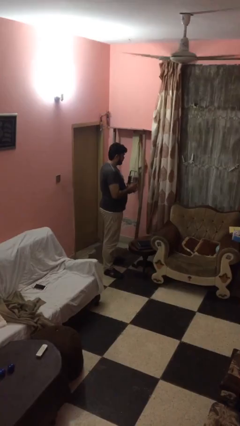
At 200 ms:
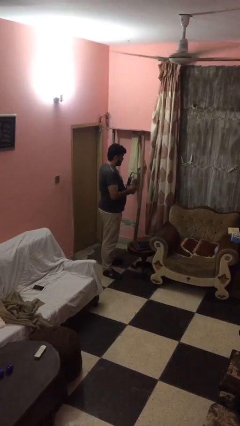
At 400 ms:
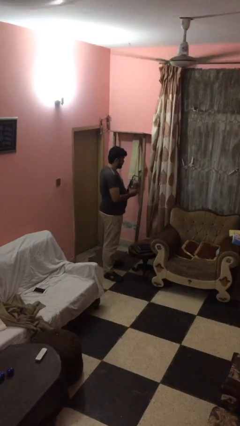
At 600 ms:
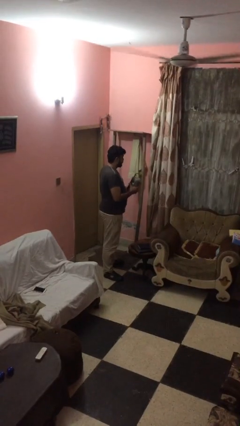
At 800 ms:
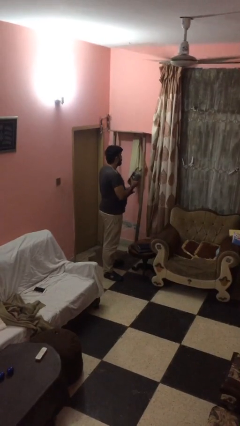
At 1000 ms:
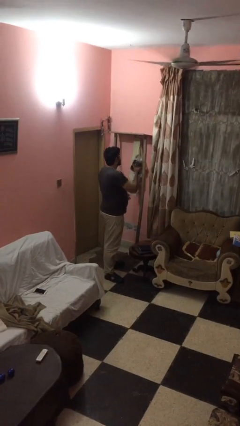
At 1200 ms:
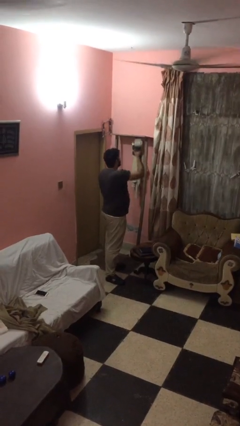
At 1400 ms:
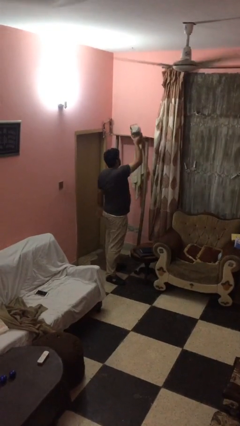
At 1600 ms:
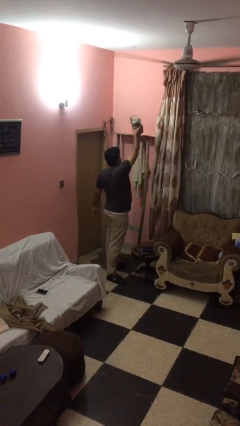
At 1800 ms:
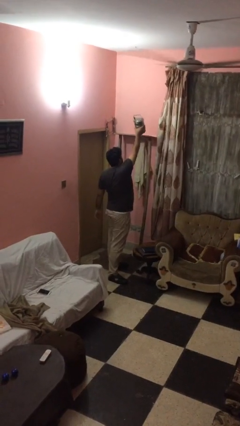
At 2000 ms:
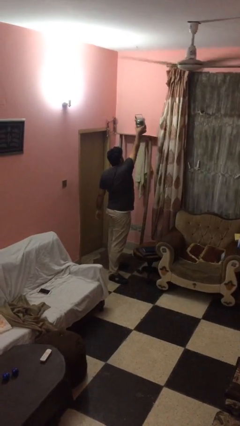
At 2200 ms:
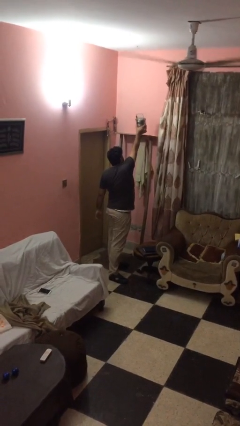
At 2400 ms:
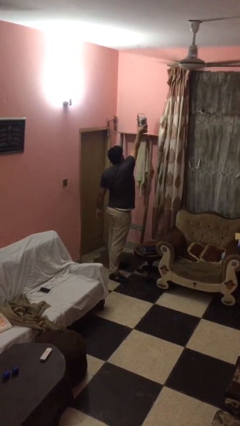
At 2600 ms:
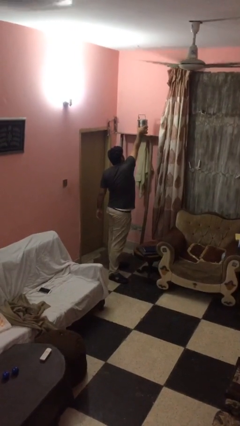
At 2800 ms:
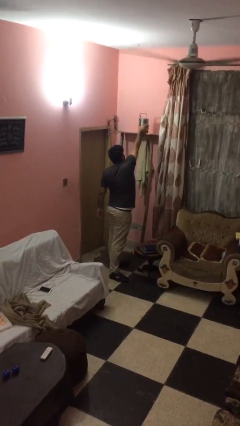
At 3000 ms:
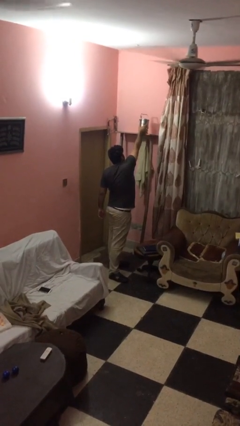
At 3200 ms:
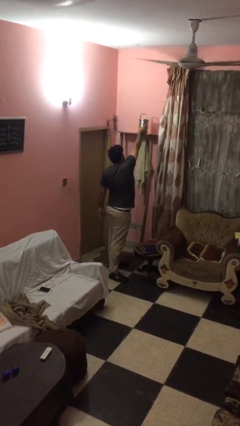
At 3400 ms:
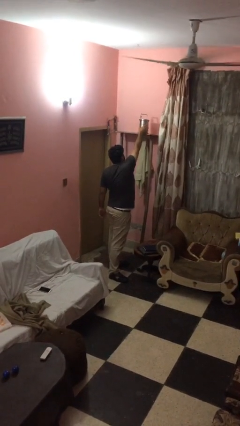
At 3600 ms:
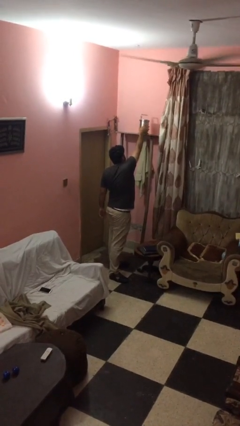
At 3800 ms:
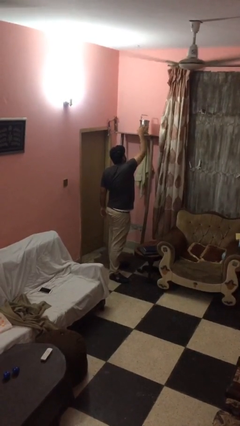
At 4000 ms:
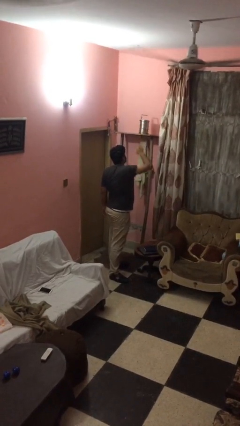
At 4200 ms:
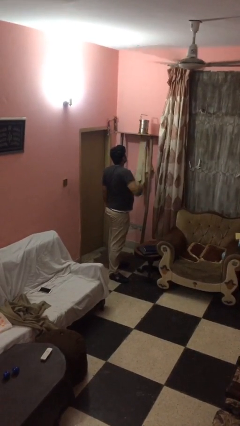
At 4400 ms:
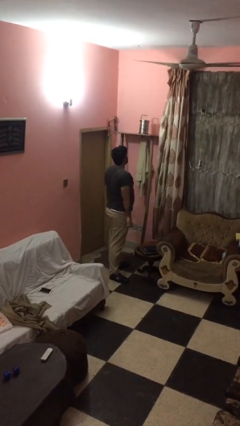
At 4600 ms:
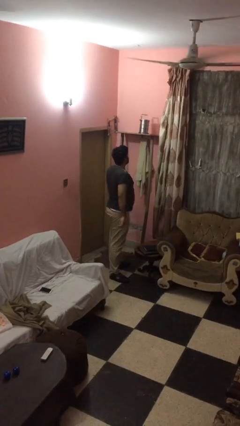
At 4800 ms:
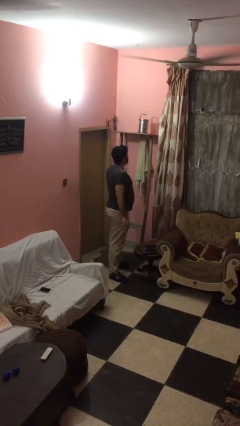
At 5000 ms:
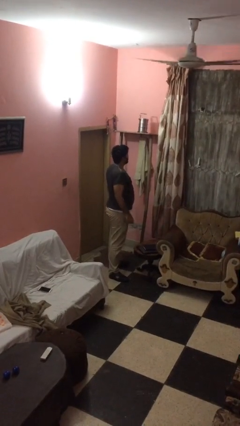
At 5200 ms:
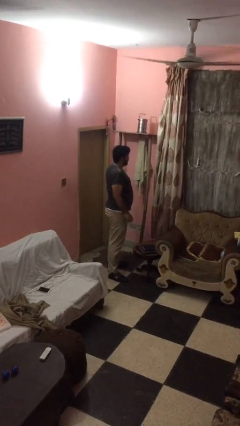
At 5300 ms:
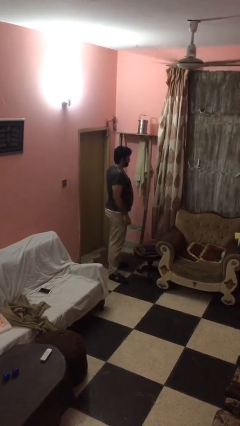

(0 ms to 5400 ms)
person puts down object on shelf

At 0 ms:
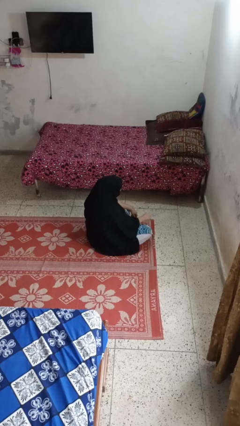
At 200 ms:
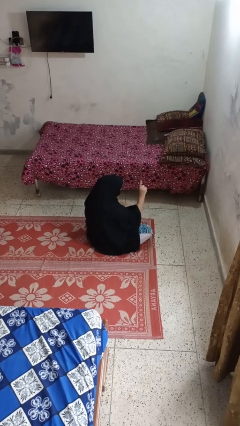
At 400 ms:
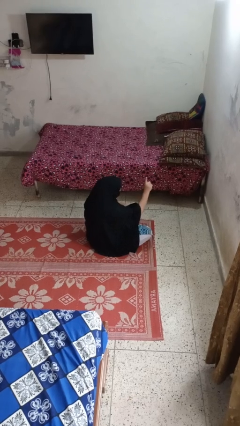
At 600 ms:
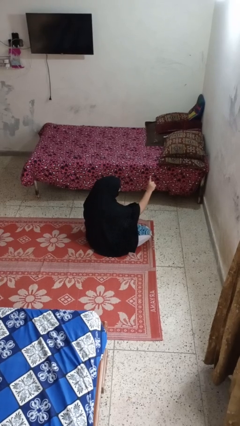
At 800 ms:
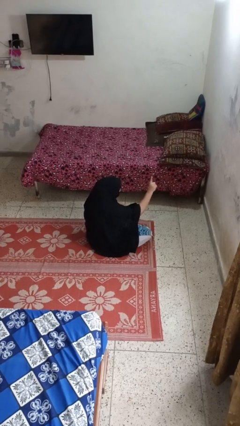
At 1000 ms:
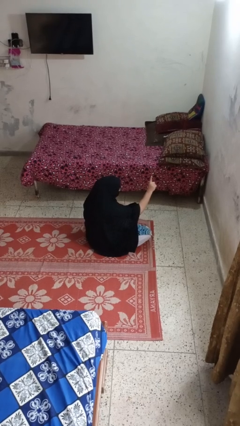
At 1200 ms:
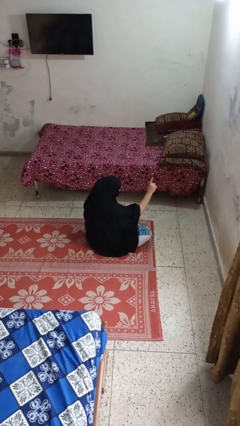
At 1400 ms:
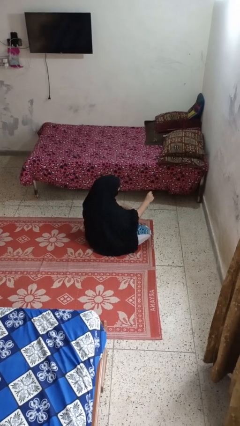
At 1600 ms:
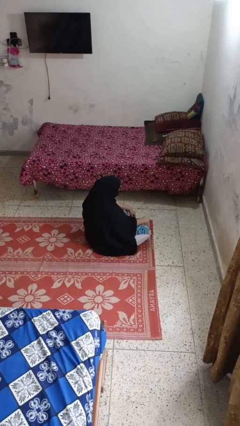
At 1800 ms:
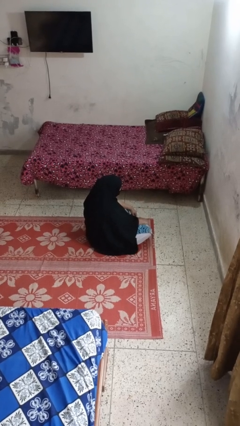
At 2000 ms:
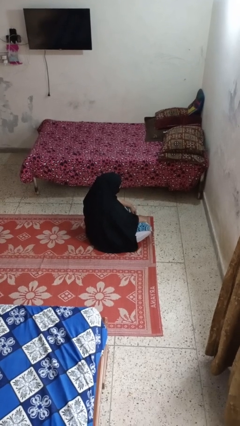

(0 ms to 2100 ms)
person gestures number one

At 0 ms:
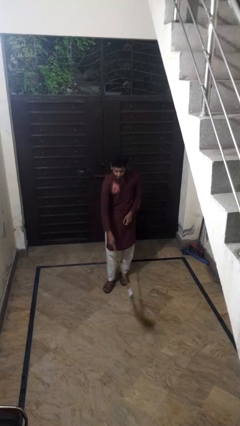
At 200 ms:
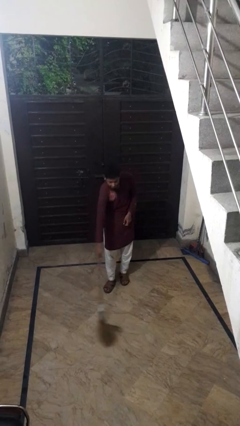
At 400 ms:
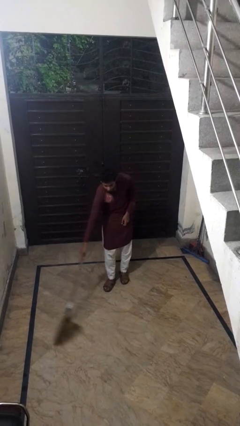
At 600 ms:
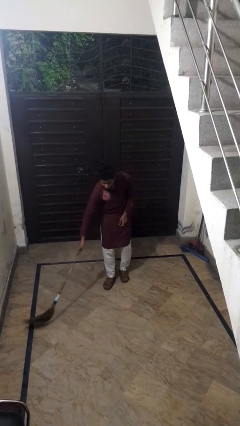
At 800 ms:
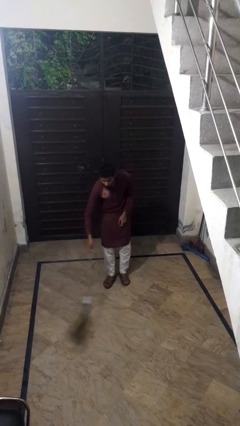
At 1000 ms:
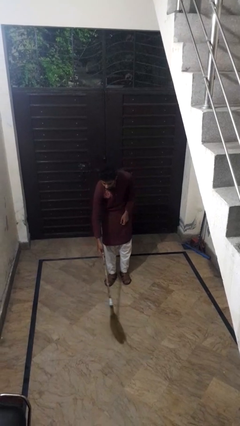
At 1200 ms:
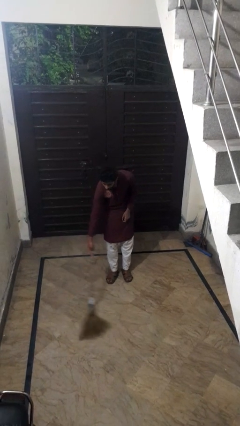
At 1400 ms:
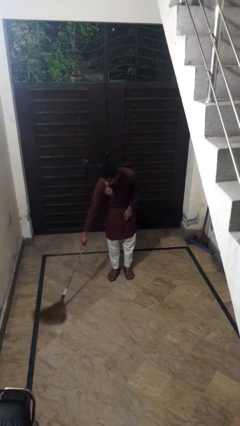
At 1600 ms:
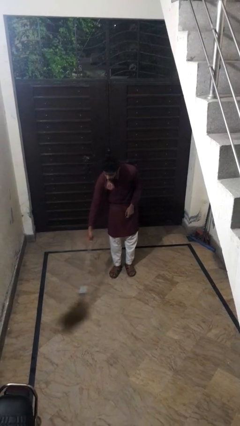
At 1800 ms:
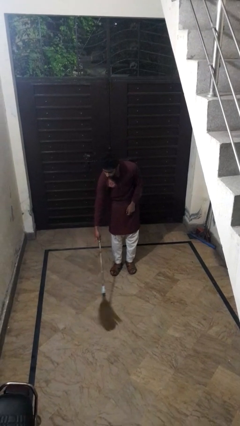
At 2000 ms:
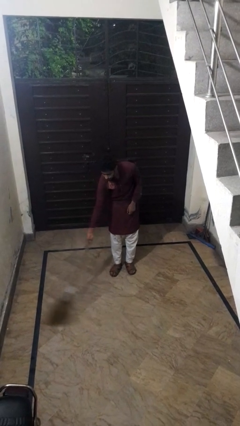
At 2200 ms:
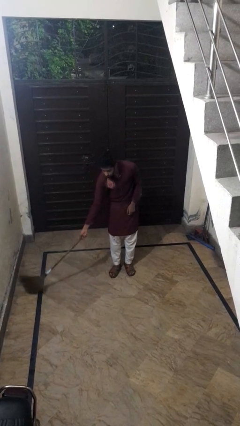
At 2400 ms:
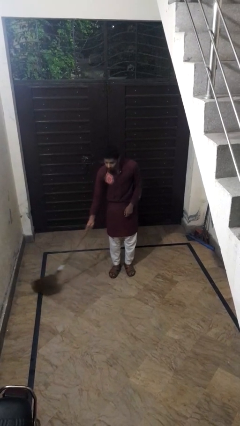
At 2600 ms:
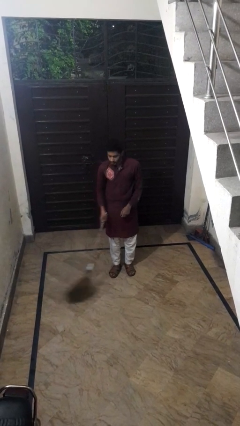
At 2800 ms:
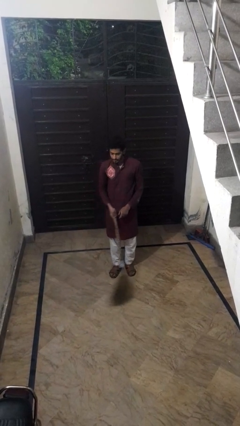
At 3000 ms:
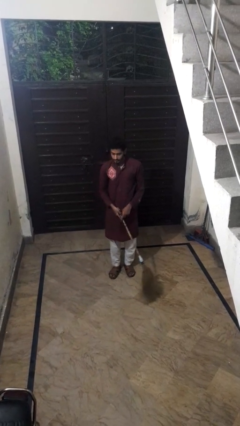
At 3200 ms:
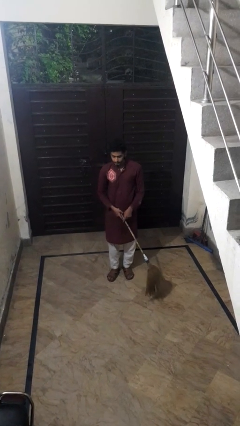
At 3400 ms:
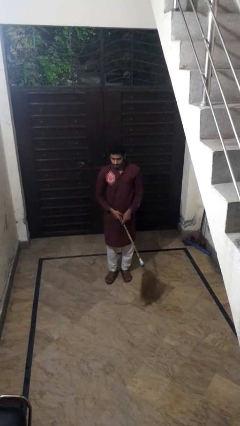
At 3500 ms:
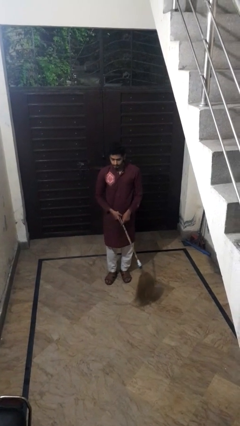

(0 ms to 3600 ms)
person sweeps floor

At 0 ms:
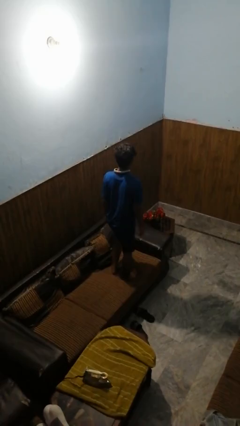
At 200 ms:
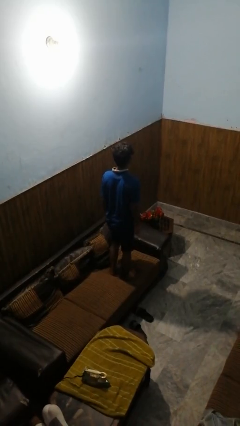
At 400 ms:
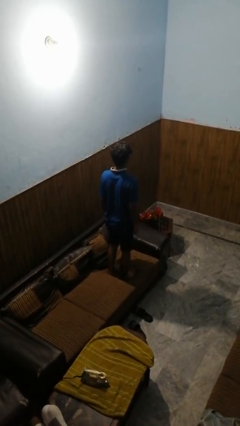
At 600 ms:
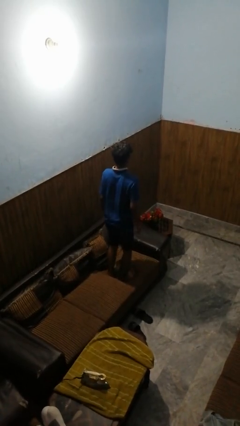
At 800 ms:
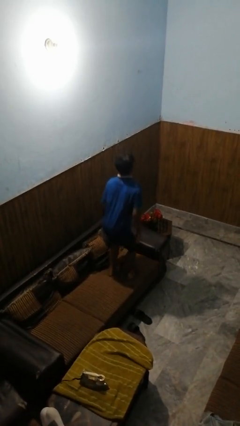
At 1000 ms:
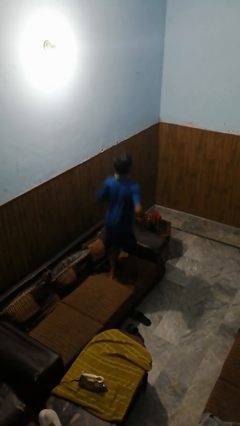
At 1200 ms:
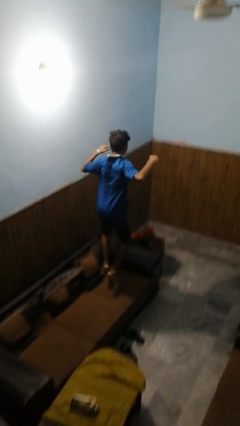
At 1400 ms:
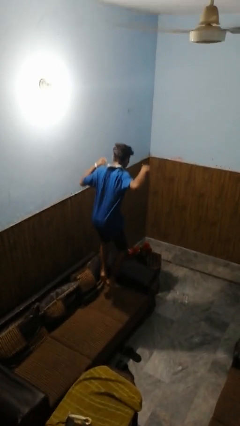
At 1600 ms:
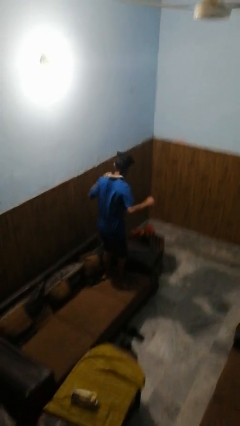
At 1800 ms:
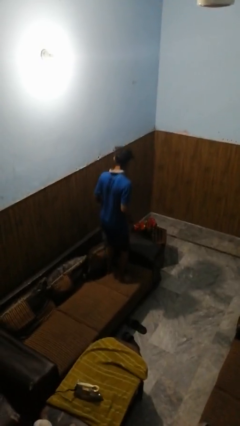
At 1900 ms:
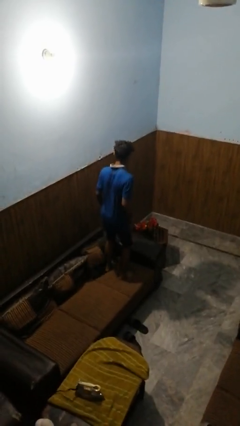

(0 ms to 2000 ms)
person jumps on couch

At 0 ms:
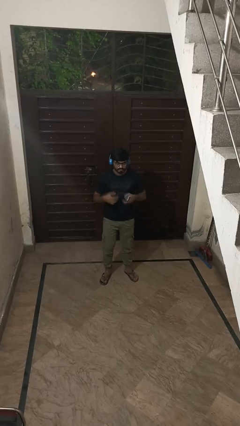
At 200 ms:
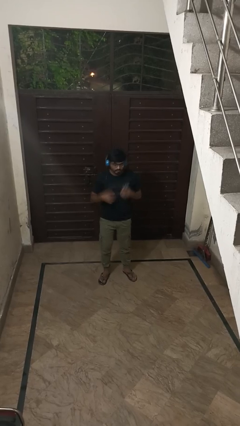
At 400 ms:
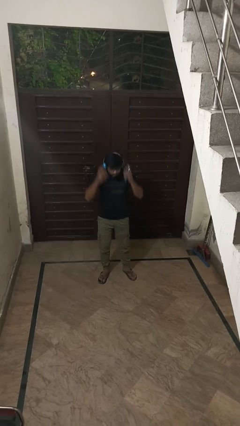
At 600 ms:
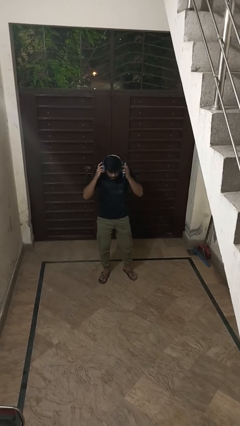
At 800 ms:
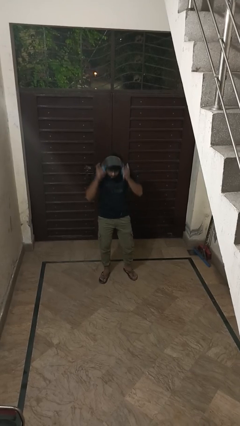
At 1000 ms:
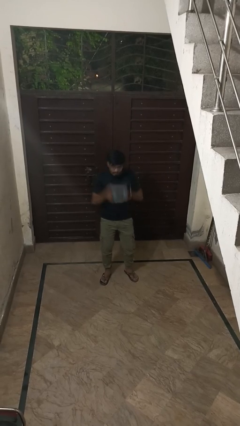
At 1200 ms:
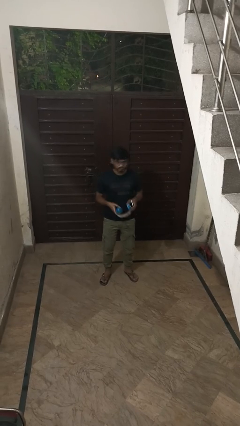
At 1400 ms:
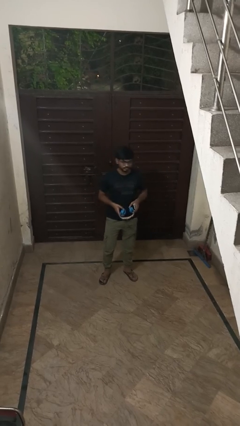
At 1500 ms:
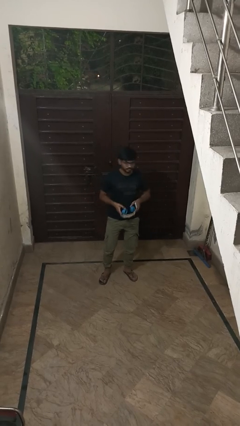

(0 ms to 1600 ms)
person takes off headphones

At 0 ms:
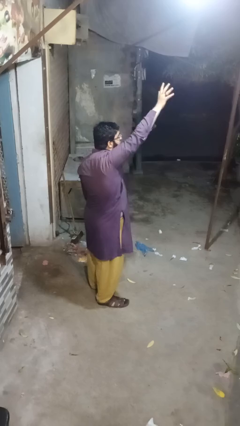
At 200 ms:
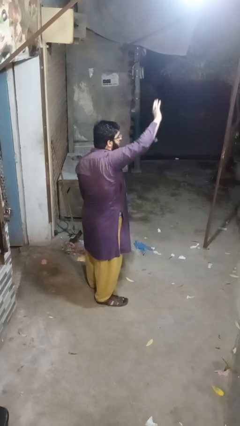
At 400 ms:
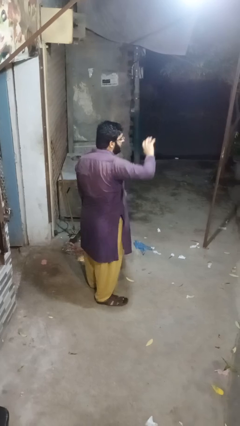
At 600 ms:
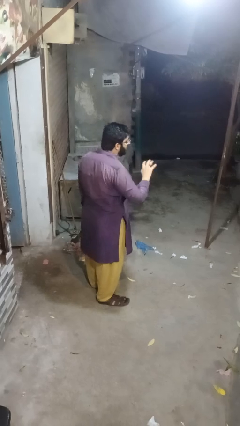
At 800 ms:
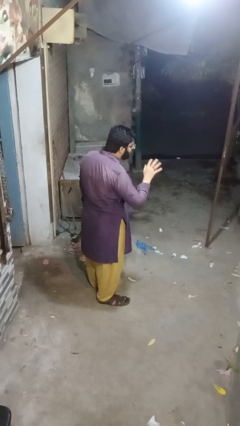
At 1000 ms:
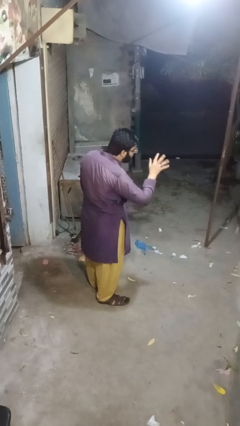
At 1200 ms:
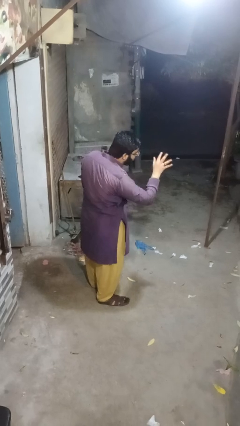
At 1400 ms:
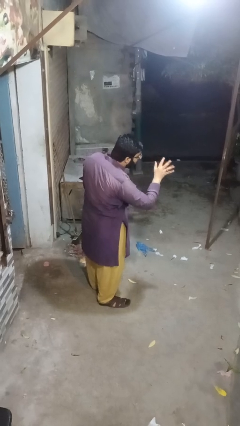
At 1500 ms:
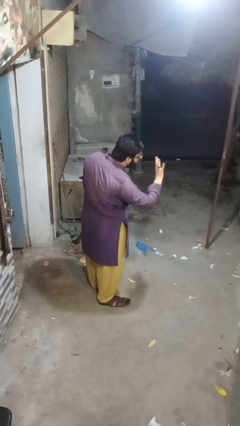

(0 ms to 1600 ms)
person gestures lower hand

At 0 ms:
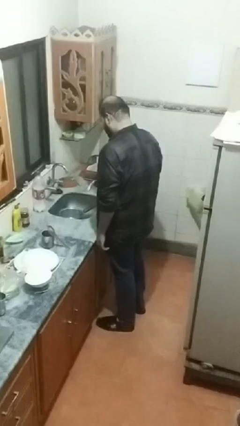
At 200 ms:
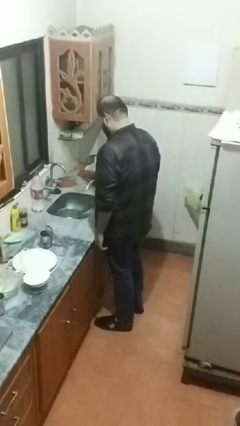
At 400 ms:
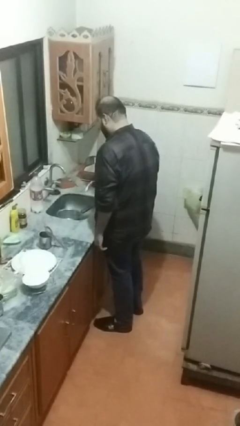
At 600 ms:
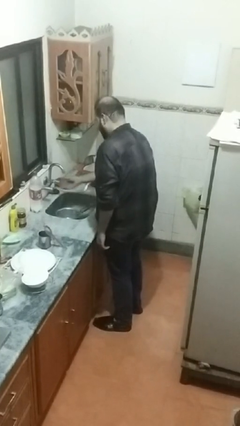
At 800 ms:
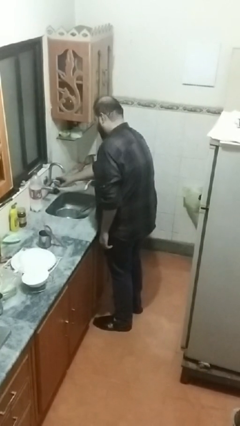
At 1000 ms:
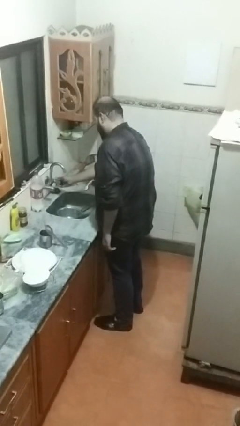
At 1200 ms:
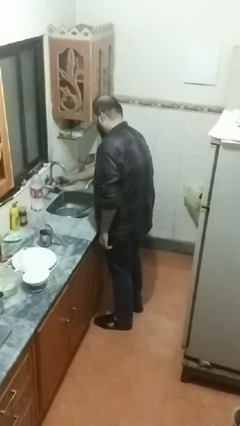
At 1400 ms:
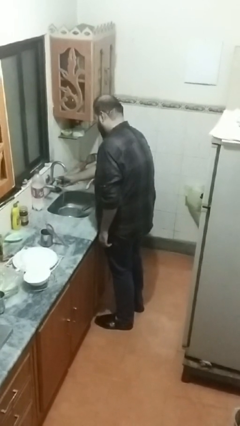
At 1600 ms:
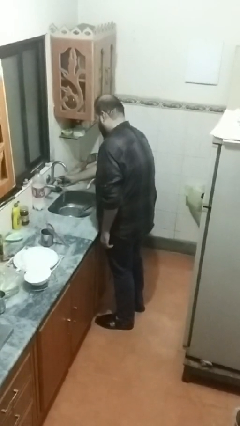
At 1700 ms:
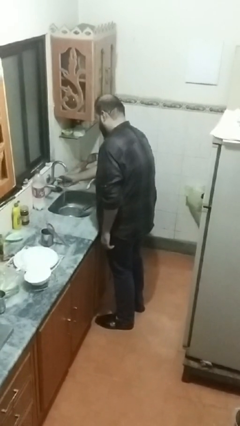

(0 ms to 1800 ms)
person turns on faucet
